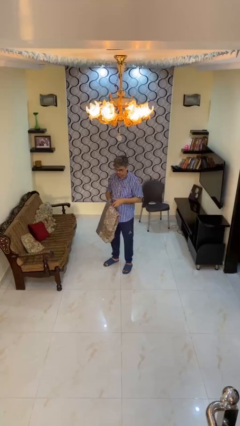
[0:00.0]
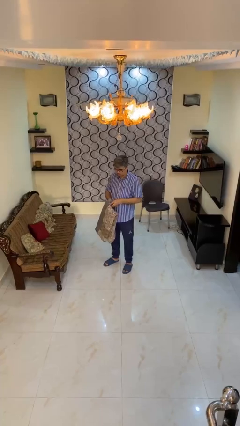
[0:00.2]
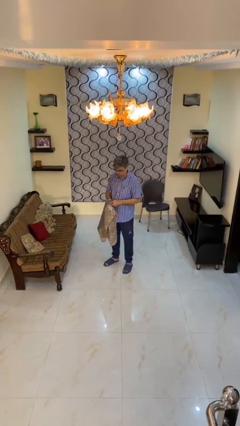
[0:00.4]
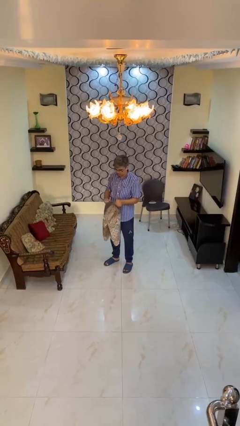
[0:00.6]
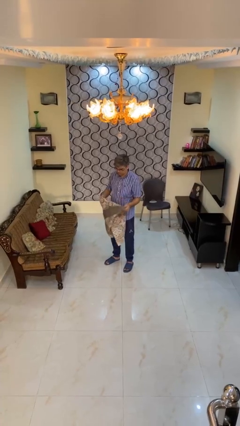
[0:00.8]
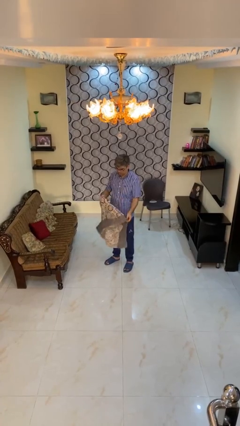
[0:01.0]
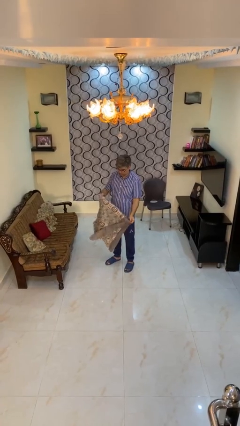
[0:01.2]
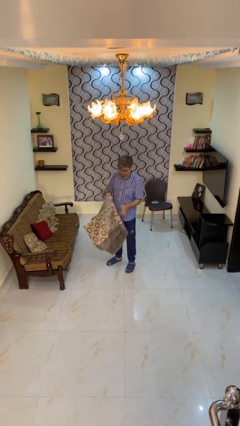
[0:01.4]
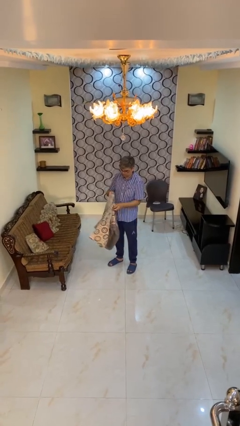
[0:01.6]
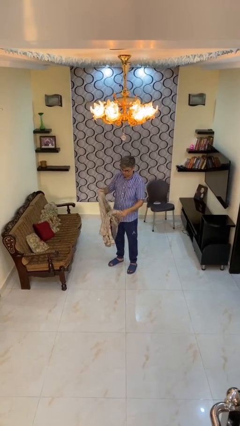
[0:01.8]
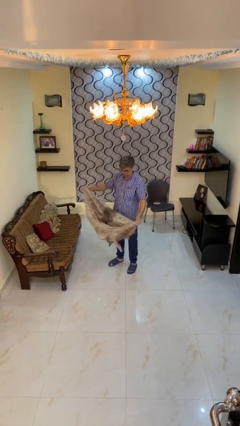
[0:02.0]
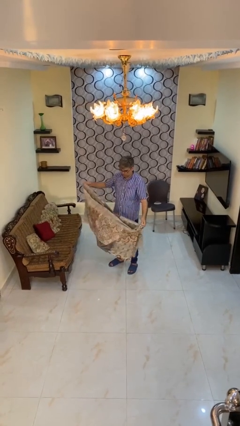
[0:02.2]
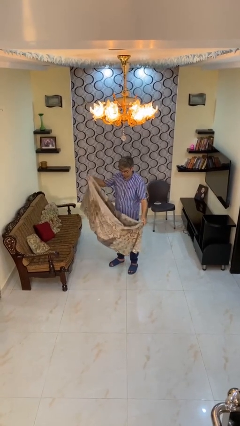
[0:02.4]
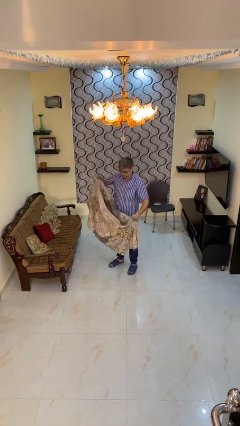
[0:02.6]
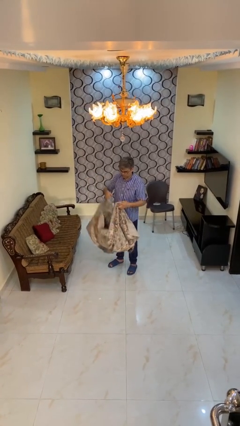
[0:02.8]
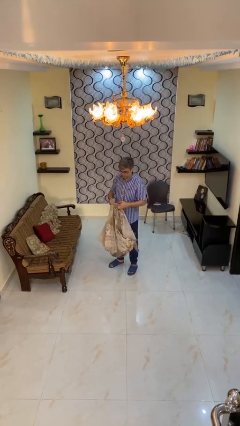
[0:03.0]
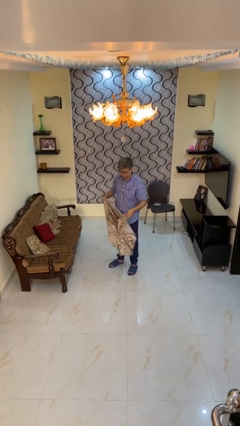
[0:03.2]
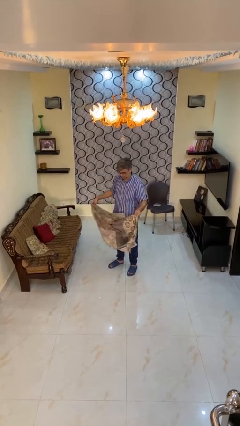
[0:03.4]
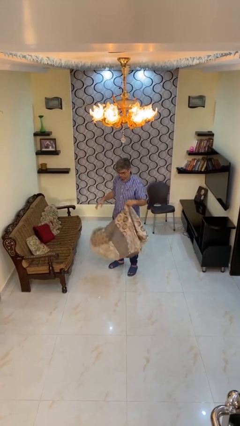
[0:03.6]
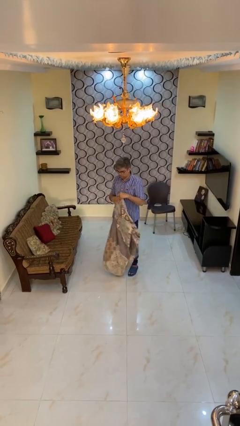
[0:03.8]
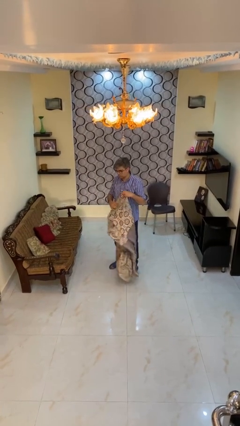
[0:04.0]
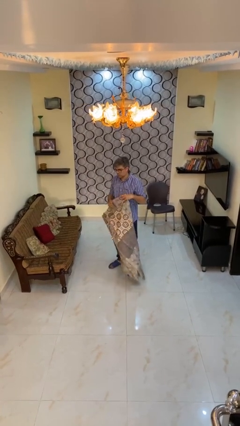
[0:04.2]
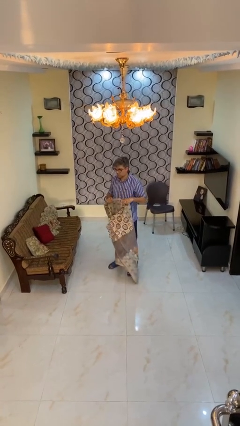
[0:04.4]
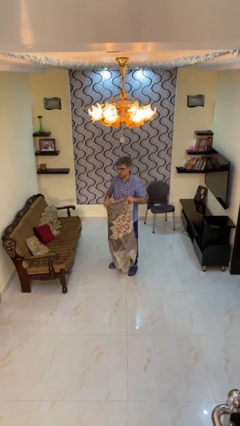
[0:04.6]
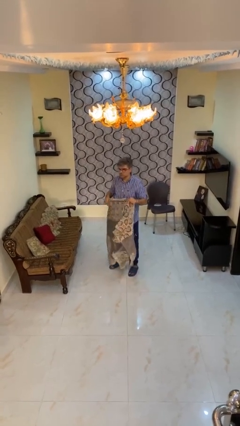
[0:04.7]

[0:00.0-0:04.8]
person unfolds blanket

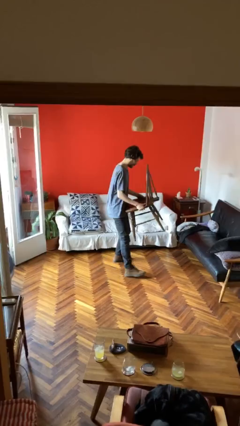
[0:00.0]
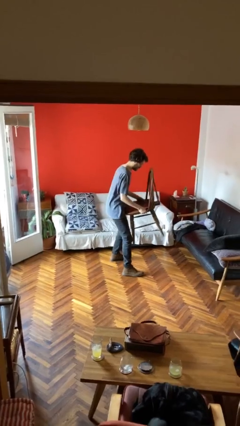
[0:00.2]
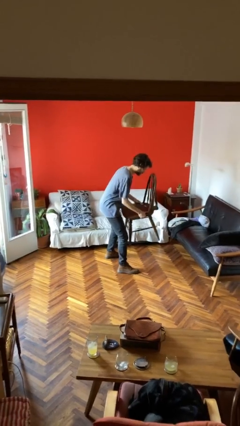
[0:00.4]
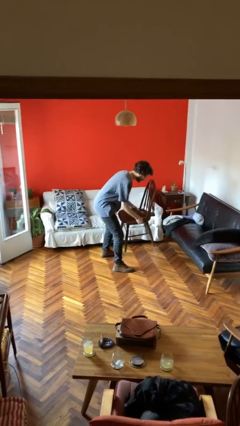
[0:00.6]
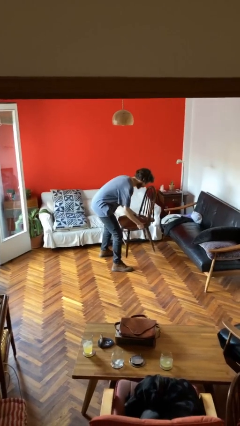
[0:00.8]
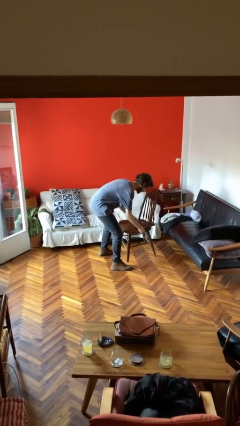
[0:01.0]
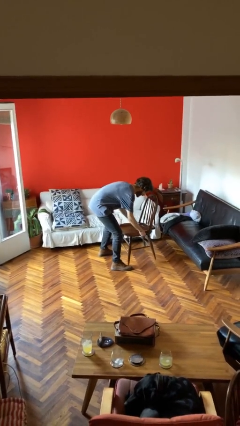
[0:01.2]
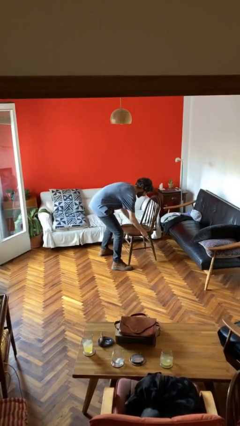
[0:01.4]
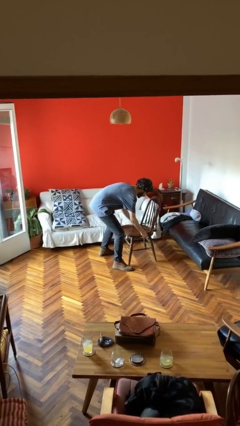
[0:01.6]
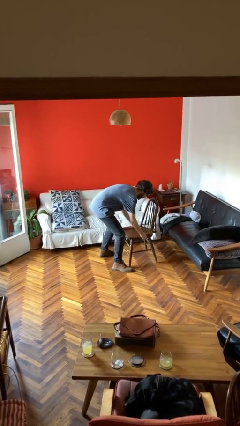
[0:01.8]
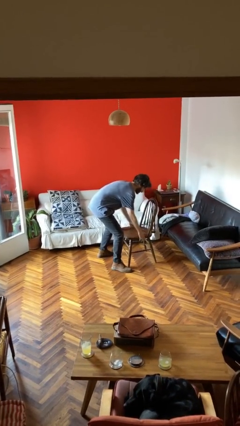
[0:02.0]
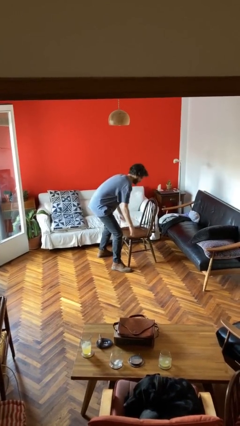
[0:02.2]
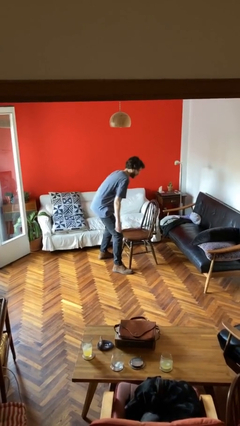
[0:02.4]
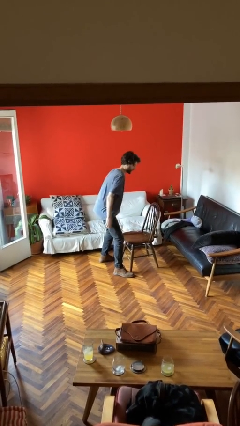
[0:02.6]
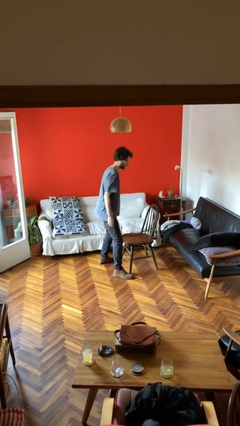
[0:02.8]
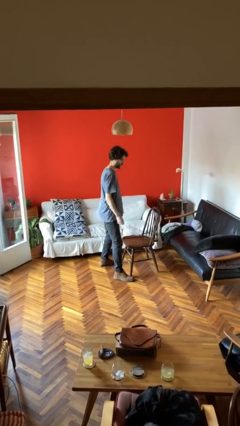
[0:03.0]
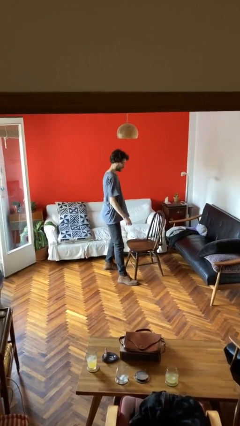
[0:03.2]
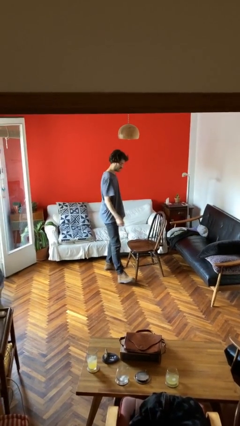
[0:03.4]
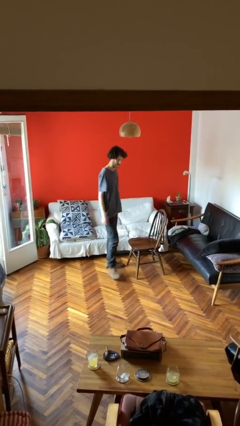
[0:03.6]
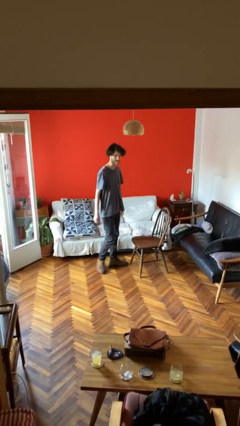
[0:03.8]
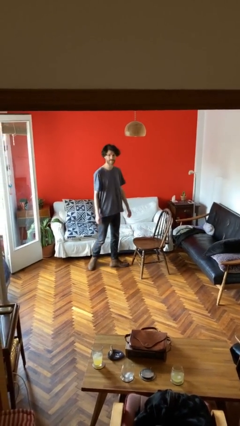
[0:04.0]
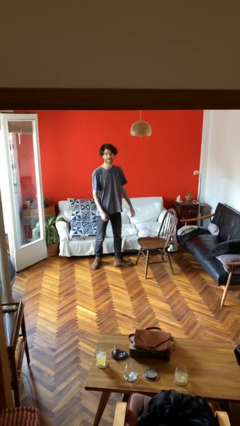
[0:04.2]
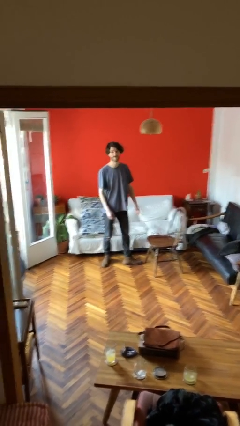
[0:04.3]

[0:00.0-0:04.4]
person puts down object on floor

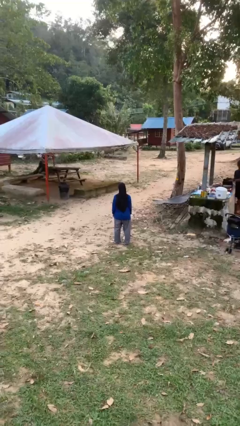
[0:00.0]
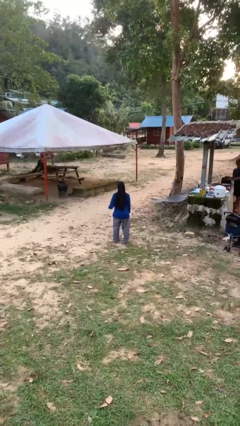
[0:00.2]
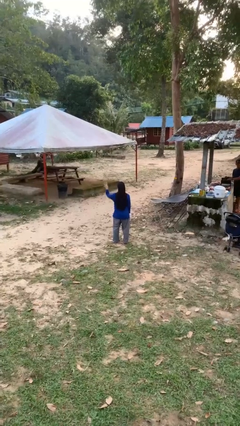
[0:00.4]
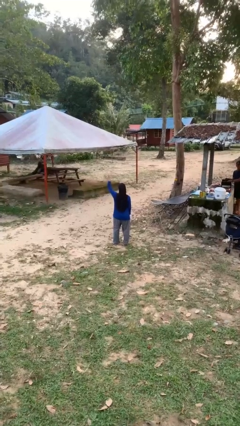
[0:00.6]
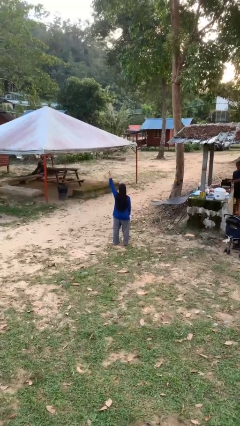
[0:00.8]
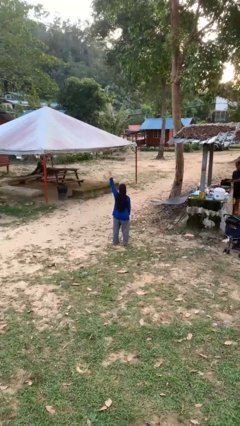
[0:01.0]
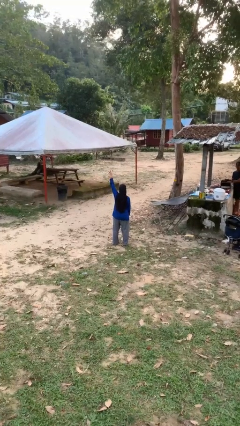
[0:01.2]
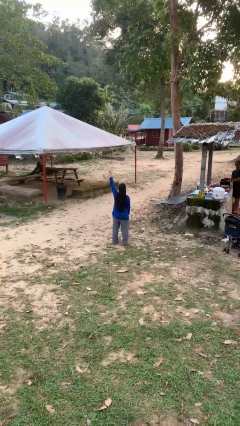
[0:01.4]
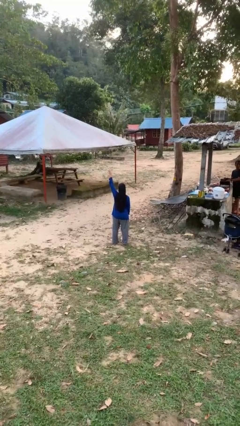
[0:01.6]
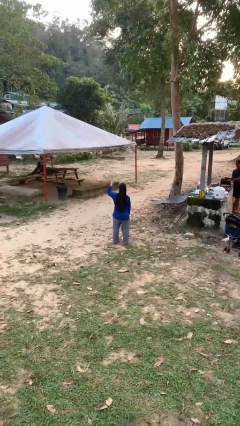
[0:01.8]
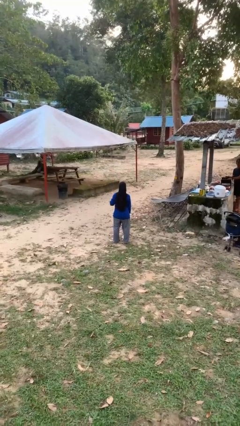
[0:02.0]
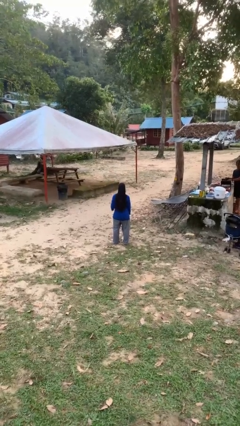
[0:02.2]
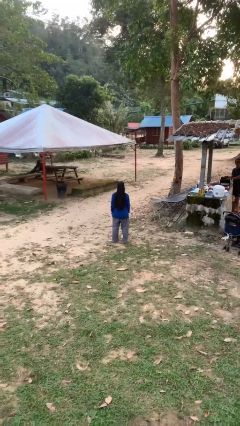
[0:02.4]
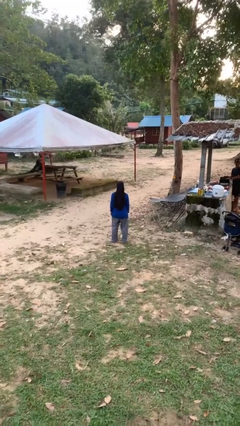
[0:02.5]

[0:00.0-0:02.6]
person gestures number four

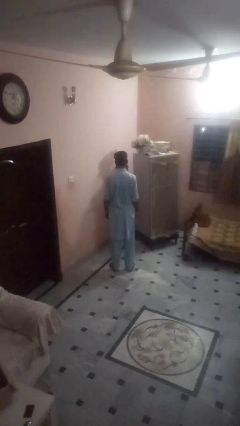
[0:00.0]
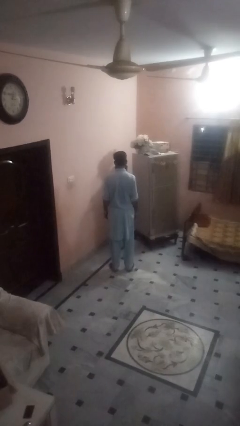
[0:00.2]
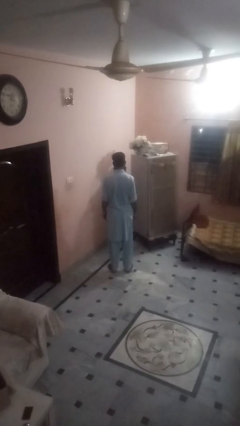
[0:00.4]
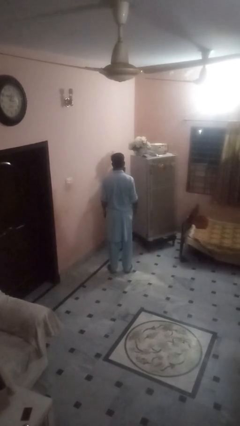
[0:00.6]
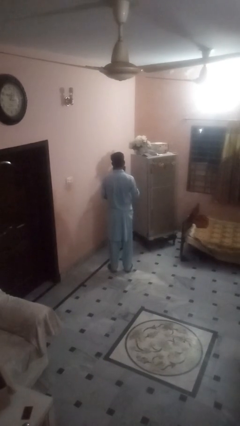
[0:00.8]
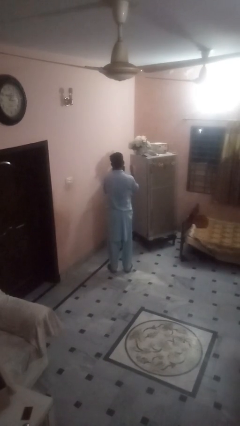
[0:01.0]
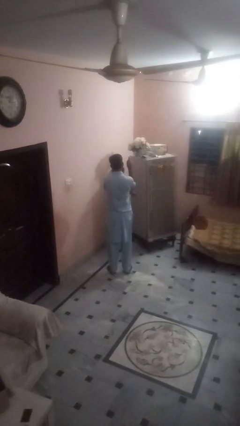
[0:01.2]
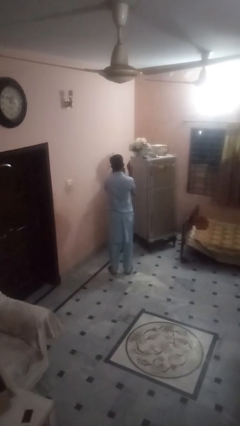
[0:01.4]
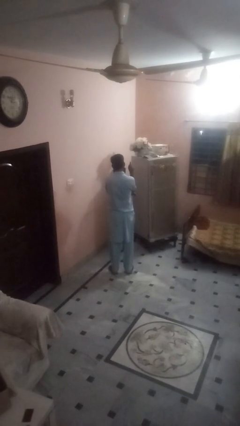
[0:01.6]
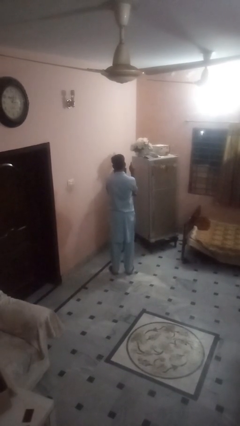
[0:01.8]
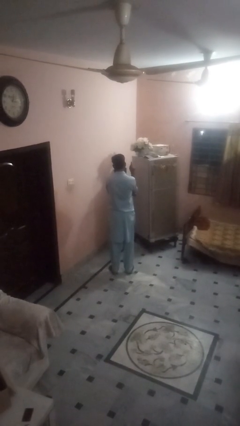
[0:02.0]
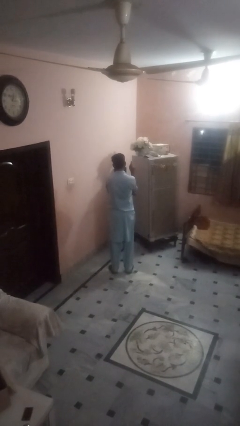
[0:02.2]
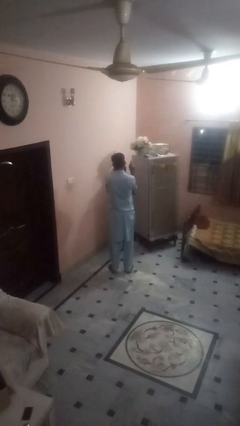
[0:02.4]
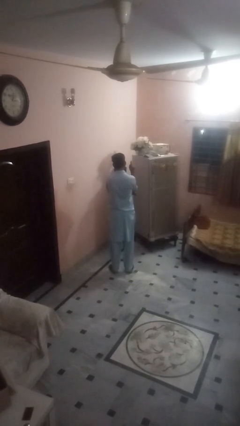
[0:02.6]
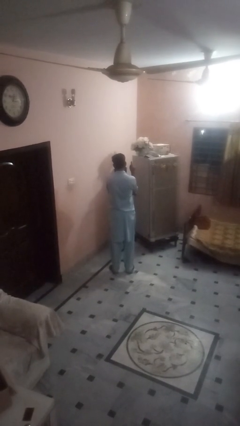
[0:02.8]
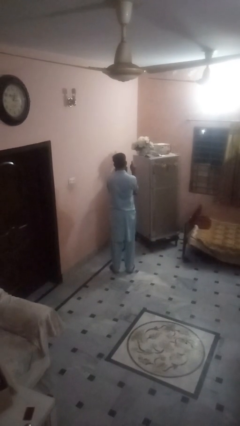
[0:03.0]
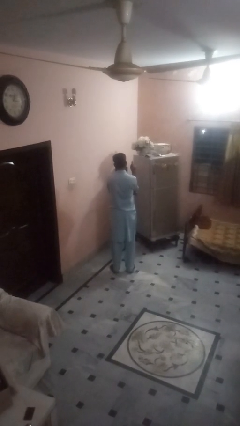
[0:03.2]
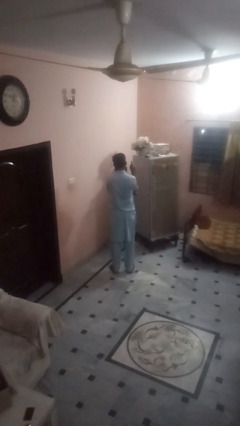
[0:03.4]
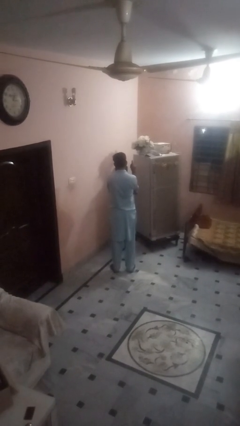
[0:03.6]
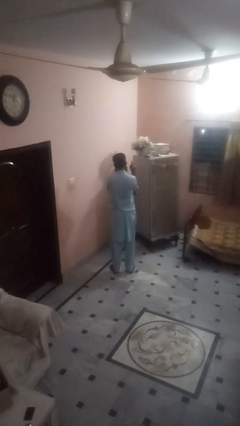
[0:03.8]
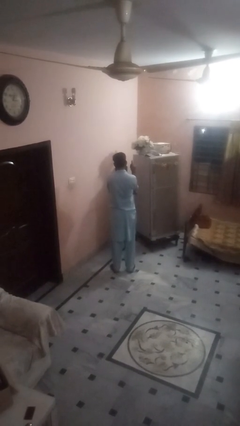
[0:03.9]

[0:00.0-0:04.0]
person gestures number one

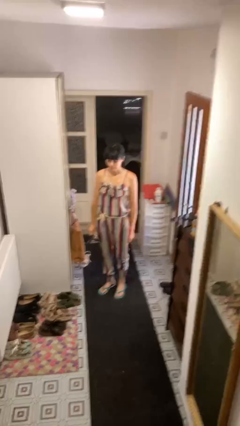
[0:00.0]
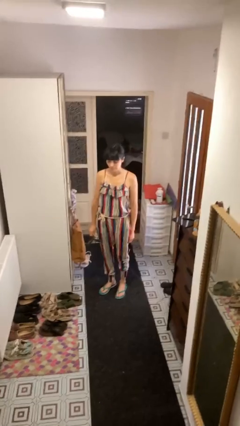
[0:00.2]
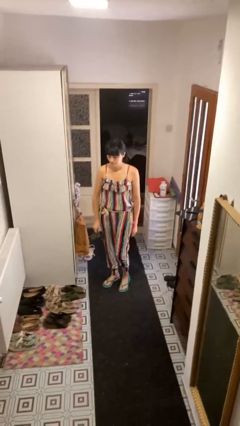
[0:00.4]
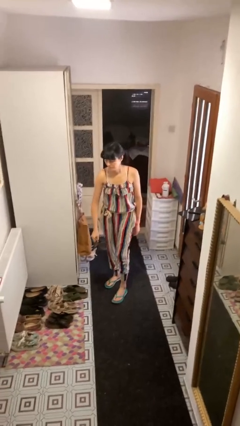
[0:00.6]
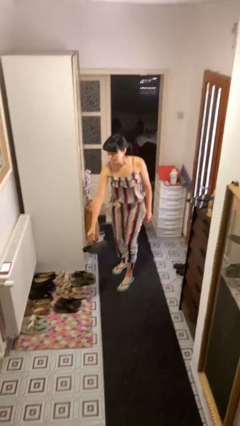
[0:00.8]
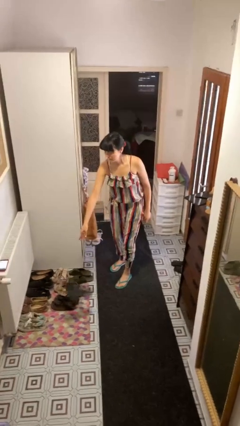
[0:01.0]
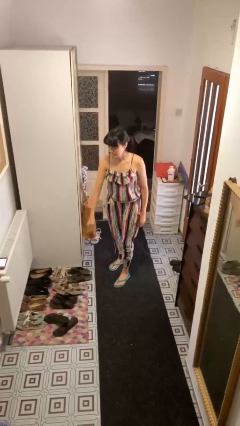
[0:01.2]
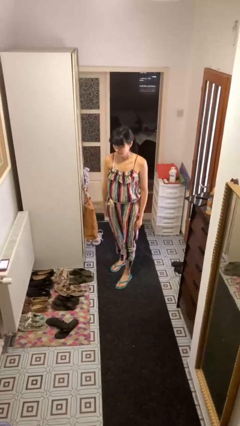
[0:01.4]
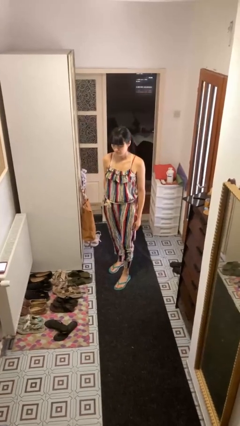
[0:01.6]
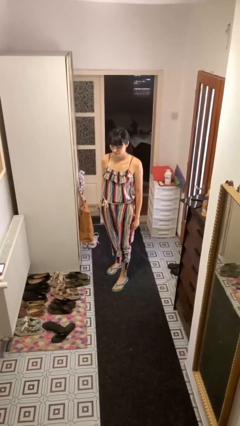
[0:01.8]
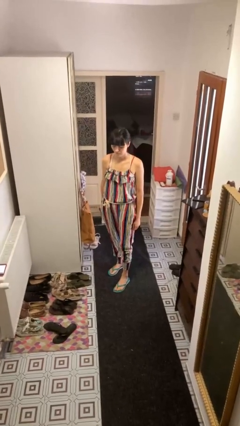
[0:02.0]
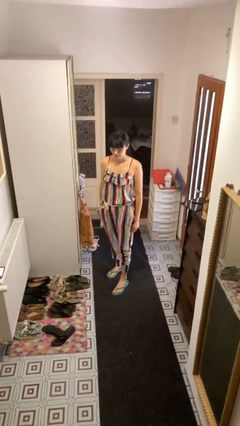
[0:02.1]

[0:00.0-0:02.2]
person throws object to ground
